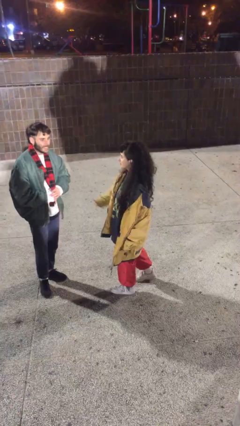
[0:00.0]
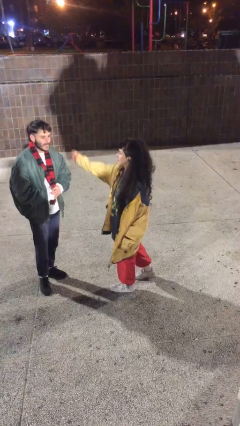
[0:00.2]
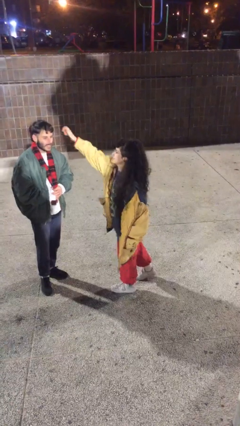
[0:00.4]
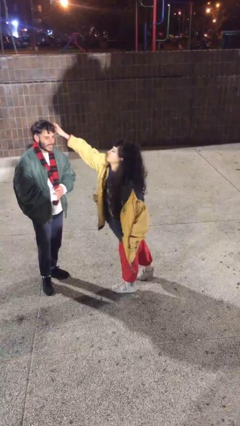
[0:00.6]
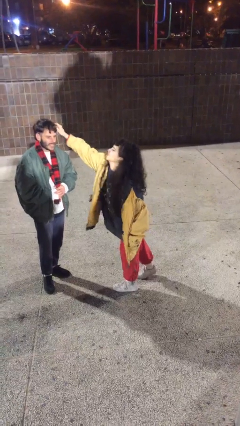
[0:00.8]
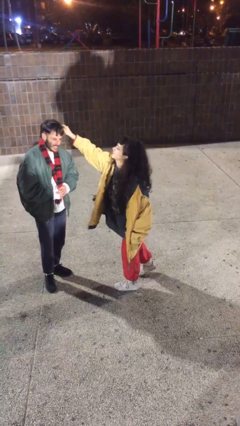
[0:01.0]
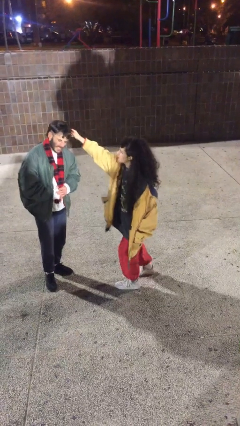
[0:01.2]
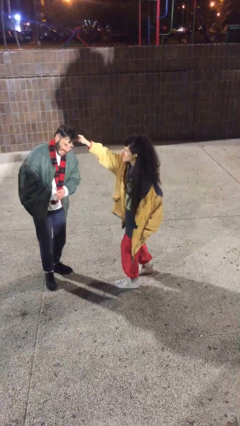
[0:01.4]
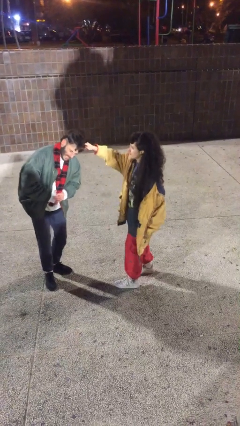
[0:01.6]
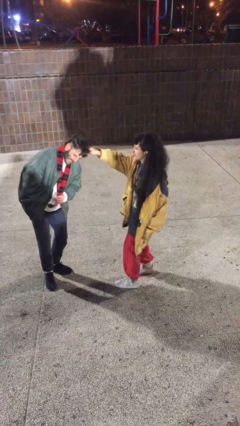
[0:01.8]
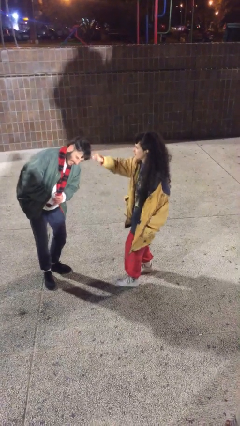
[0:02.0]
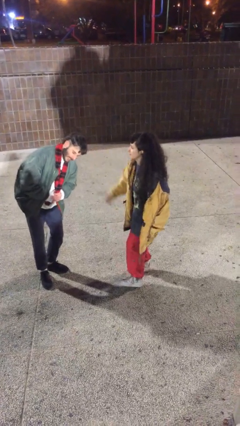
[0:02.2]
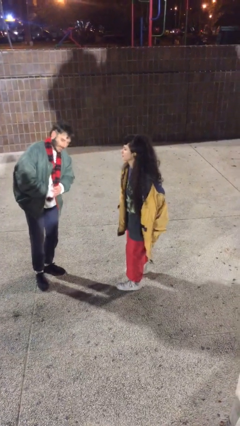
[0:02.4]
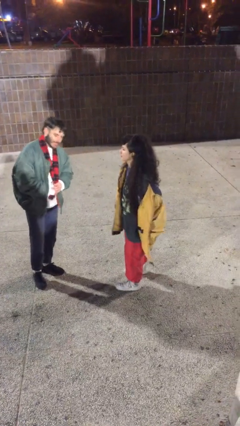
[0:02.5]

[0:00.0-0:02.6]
person grabs person by hair

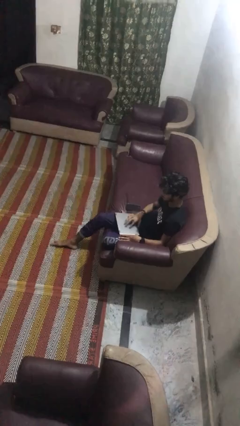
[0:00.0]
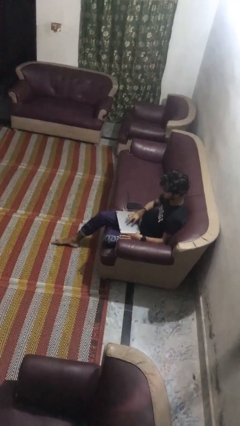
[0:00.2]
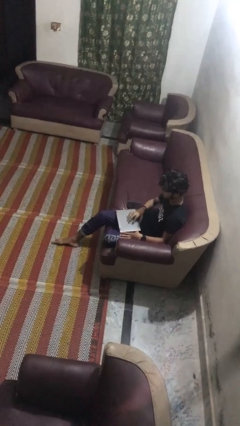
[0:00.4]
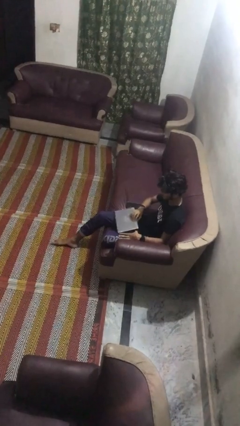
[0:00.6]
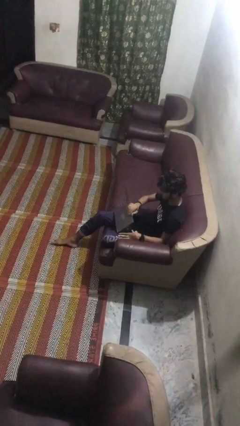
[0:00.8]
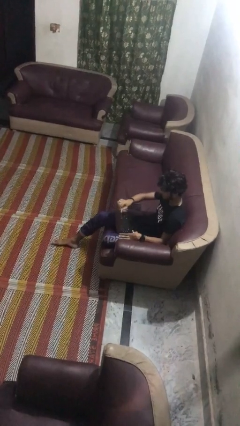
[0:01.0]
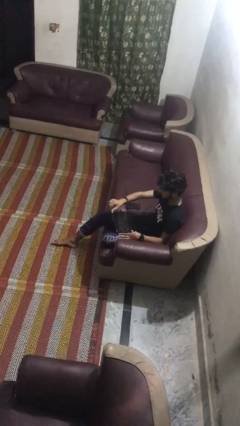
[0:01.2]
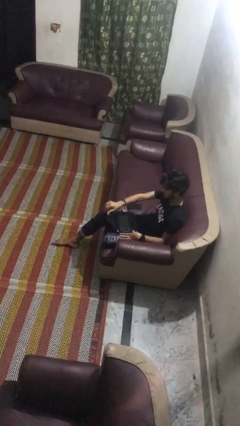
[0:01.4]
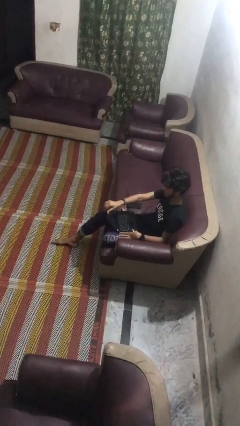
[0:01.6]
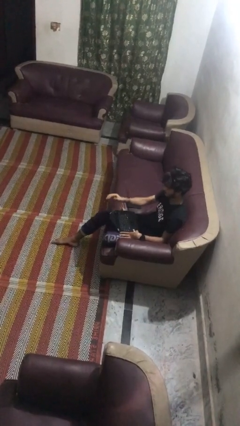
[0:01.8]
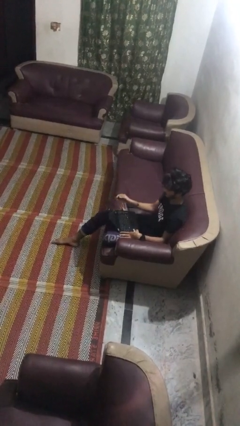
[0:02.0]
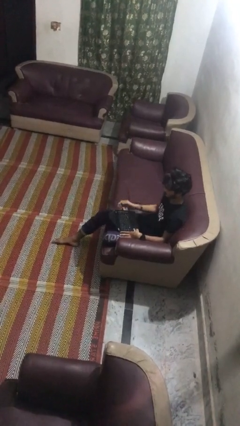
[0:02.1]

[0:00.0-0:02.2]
person opens laptop

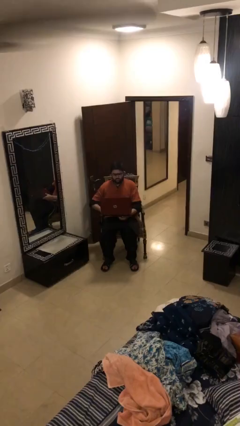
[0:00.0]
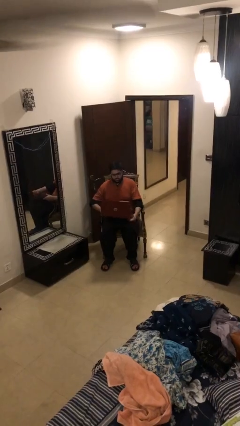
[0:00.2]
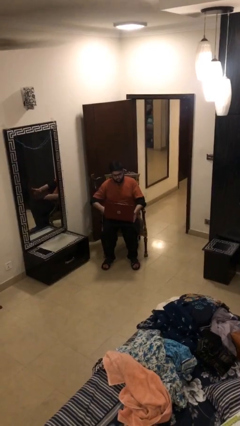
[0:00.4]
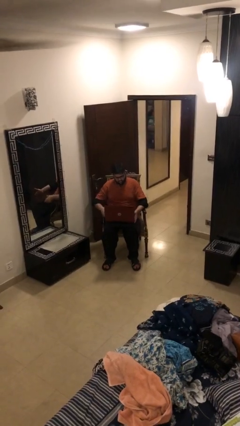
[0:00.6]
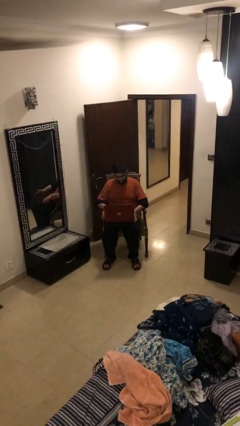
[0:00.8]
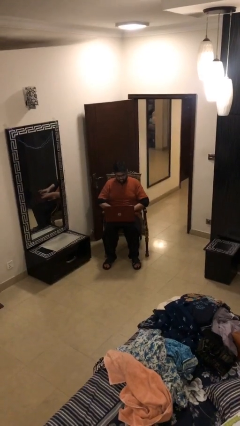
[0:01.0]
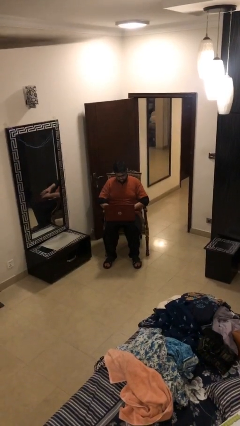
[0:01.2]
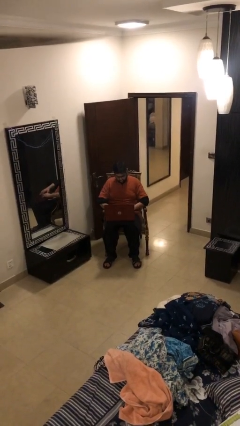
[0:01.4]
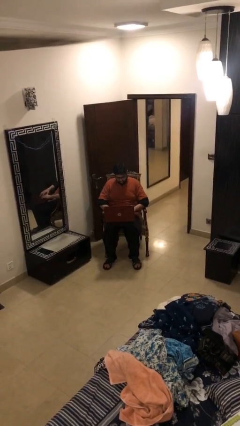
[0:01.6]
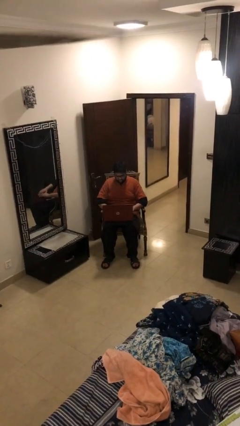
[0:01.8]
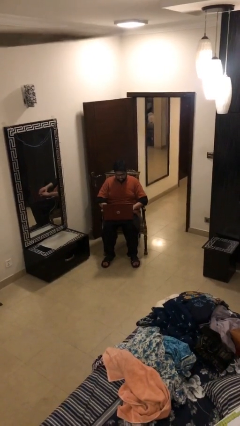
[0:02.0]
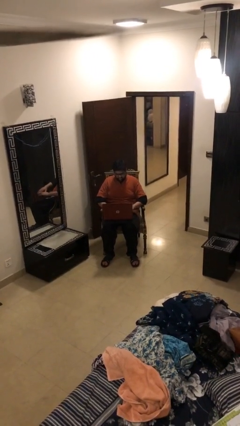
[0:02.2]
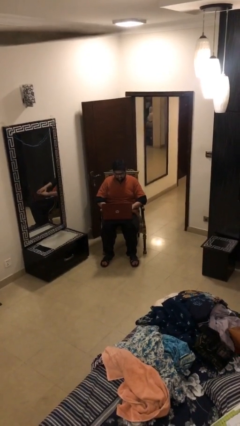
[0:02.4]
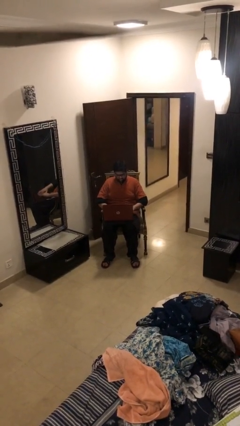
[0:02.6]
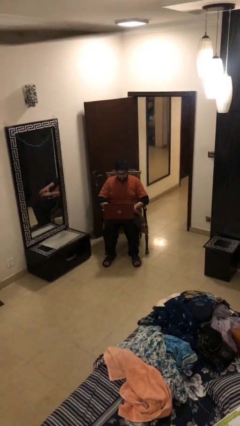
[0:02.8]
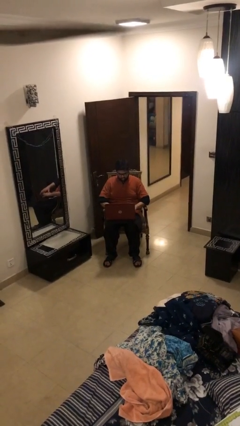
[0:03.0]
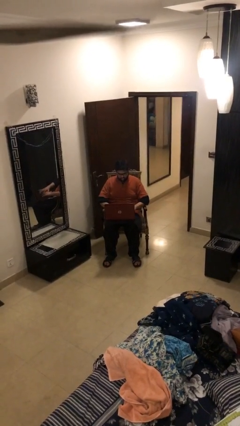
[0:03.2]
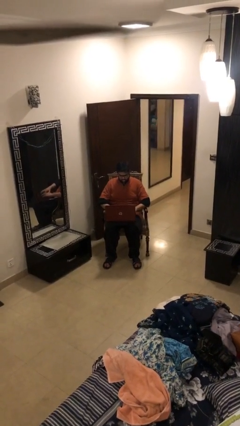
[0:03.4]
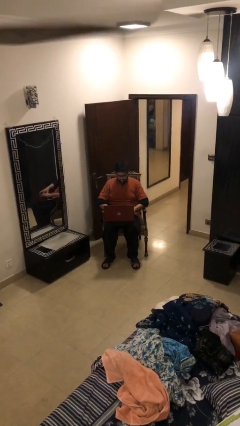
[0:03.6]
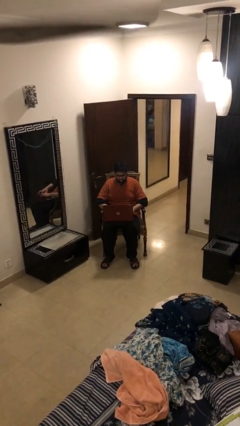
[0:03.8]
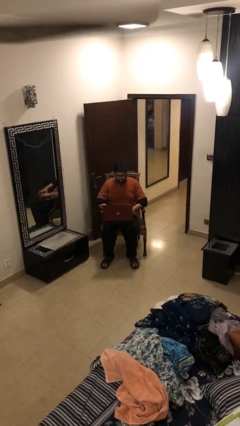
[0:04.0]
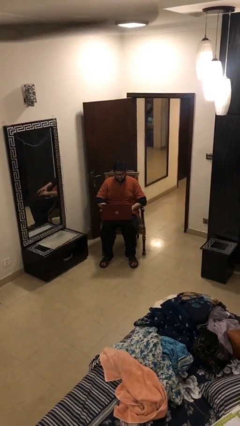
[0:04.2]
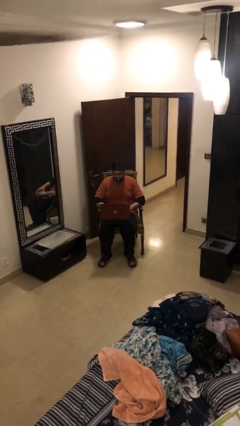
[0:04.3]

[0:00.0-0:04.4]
person interacts with laptop

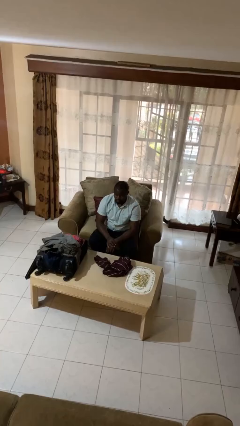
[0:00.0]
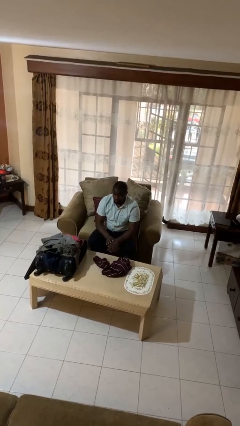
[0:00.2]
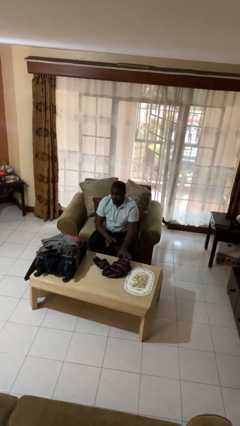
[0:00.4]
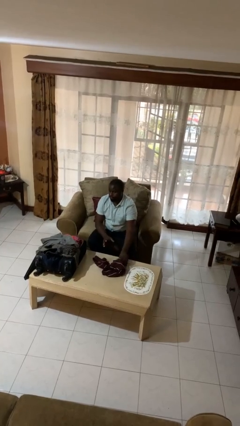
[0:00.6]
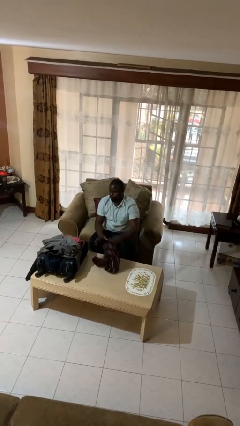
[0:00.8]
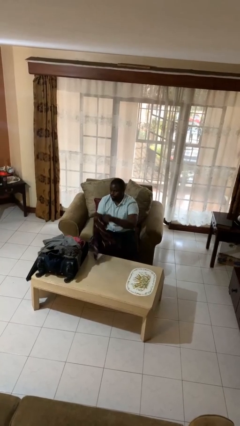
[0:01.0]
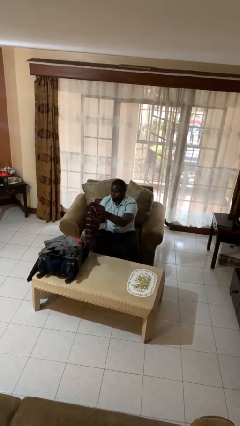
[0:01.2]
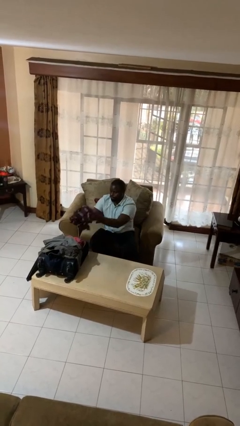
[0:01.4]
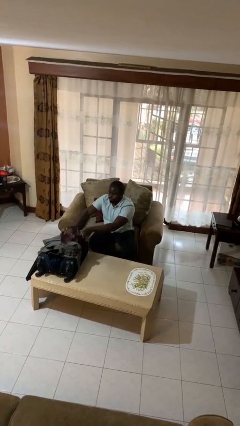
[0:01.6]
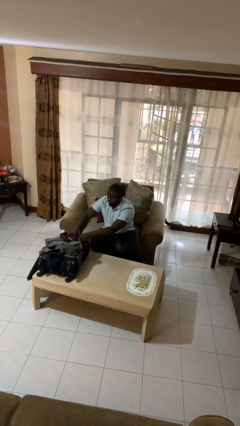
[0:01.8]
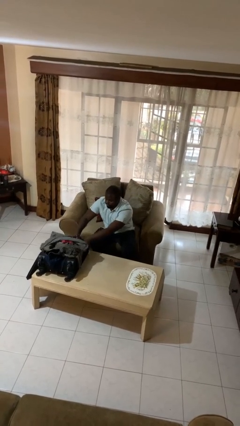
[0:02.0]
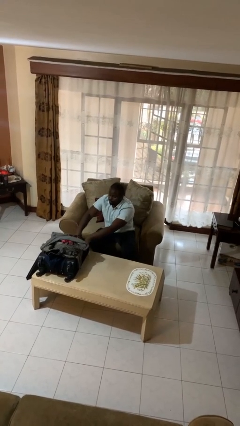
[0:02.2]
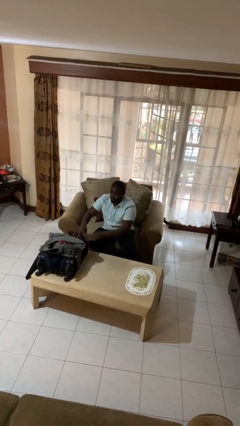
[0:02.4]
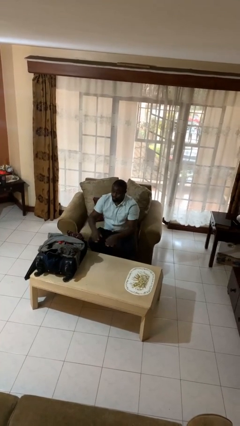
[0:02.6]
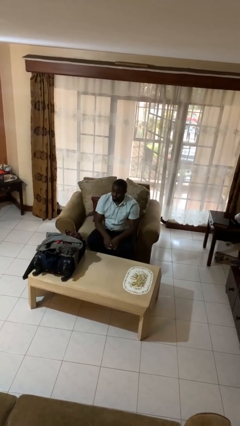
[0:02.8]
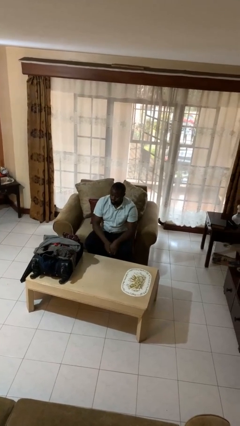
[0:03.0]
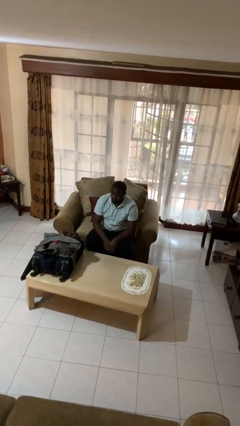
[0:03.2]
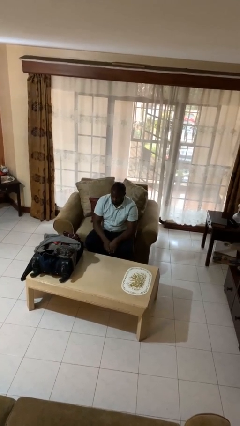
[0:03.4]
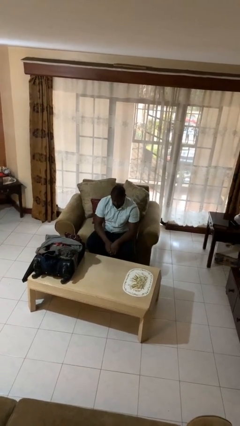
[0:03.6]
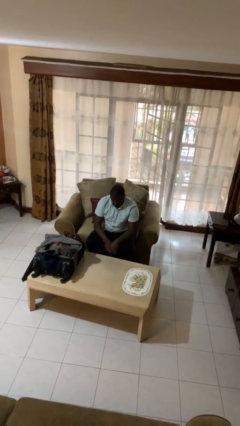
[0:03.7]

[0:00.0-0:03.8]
person loads clothes into suitcase

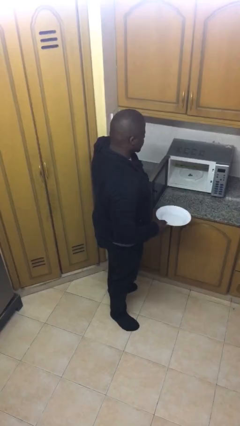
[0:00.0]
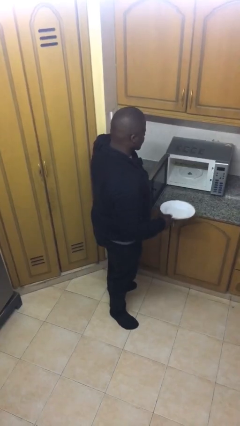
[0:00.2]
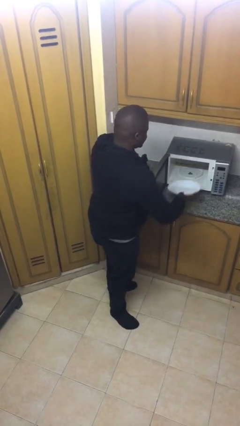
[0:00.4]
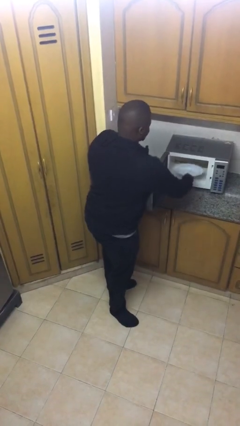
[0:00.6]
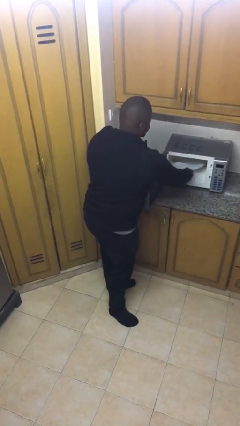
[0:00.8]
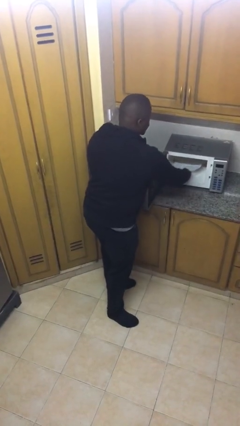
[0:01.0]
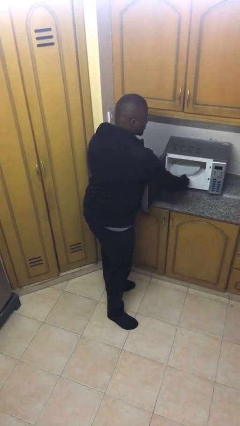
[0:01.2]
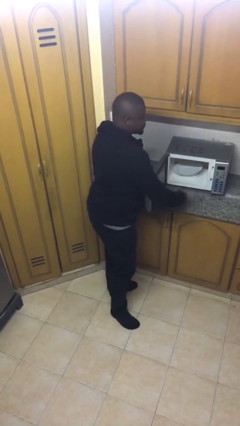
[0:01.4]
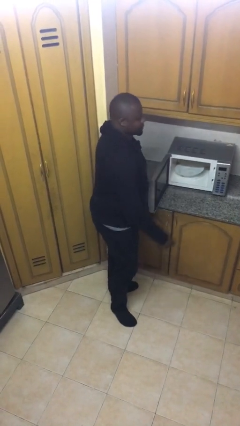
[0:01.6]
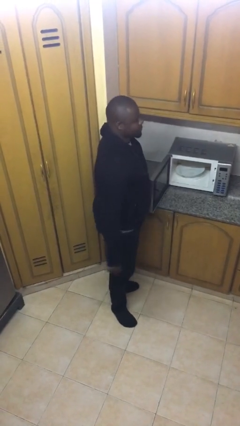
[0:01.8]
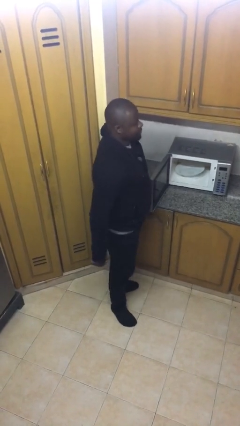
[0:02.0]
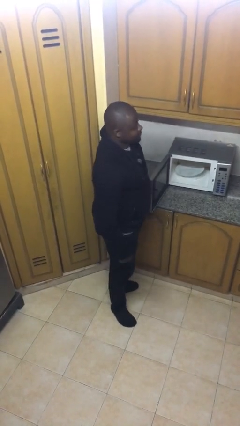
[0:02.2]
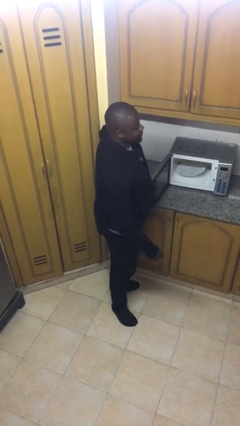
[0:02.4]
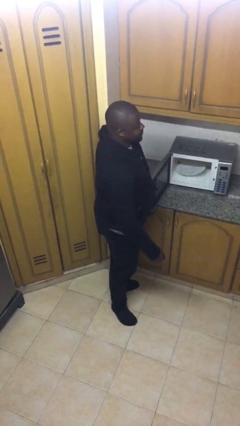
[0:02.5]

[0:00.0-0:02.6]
person puts object into microwave

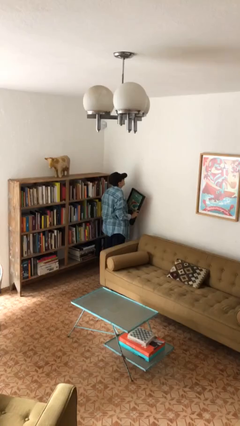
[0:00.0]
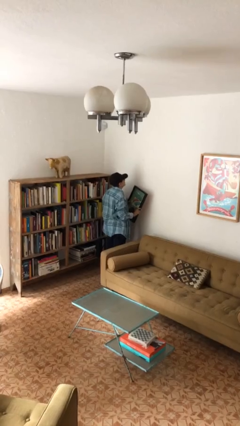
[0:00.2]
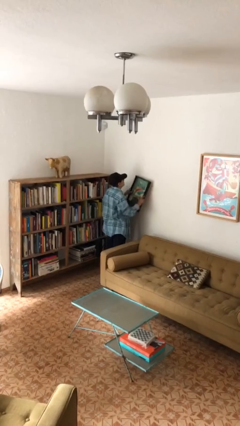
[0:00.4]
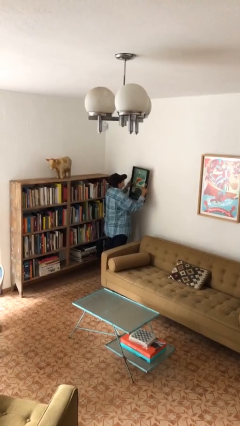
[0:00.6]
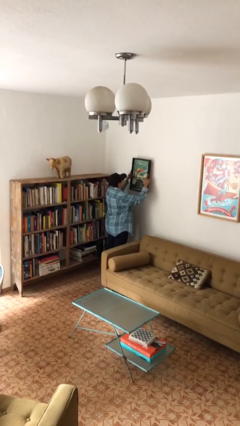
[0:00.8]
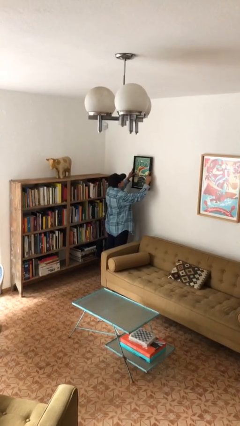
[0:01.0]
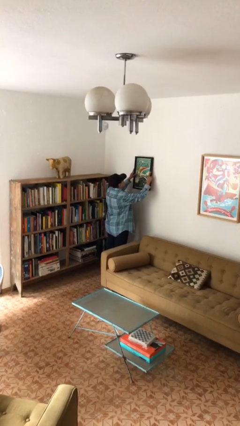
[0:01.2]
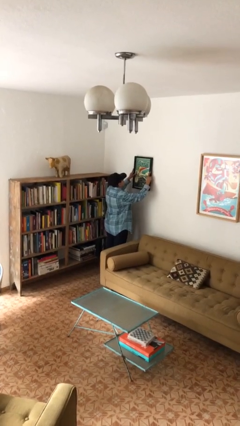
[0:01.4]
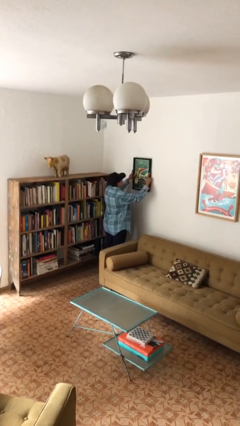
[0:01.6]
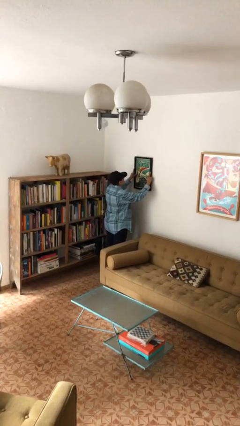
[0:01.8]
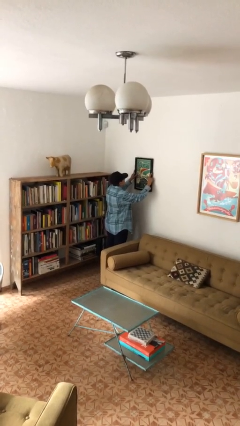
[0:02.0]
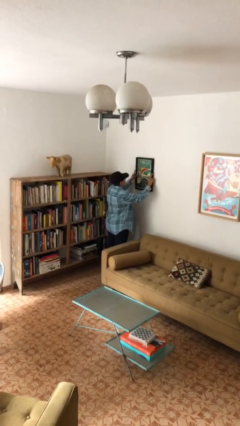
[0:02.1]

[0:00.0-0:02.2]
person puts up picture frame

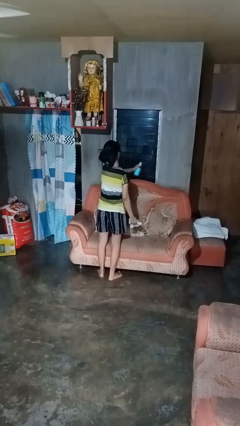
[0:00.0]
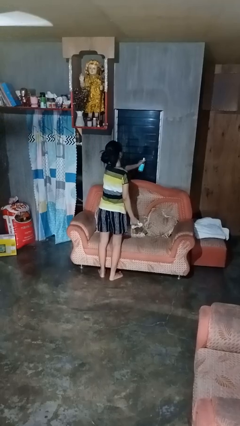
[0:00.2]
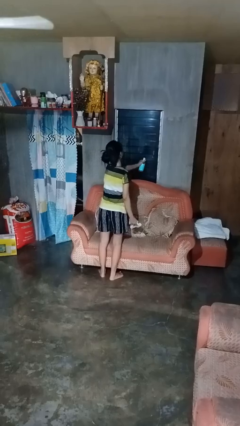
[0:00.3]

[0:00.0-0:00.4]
person sprays from bottle
